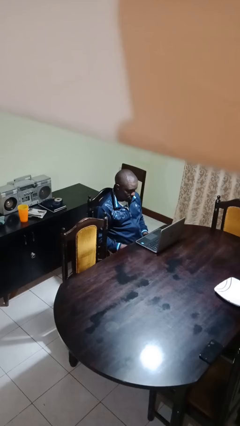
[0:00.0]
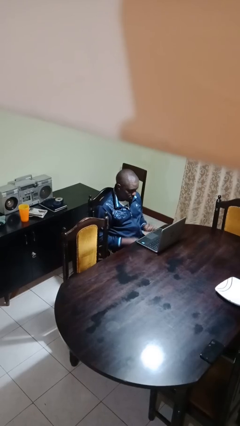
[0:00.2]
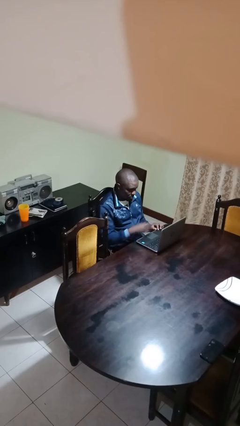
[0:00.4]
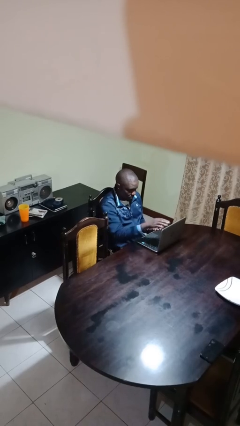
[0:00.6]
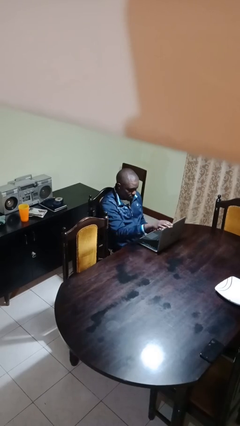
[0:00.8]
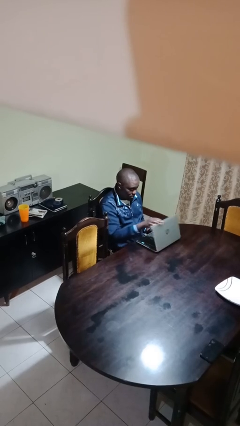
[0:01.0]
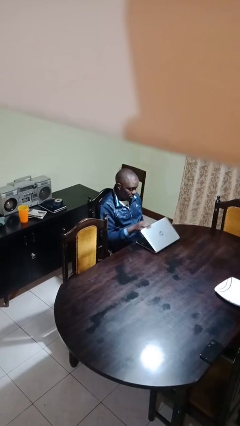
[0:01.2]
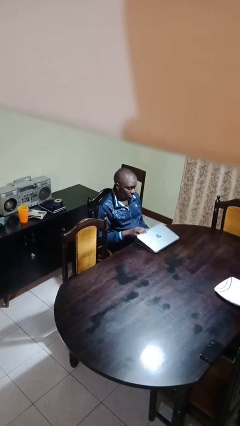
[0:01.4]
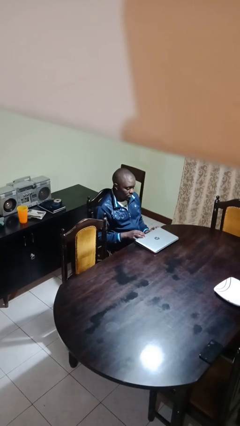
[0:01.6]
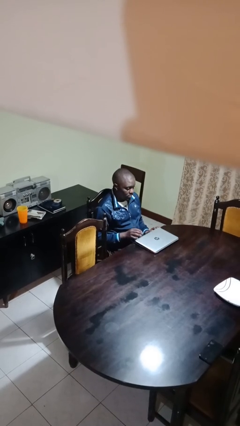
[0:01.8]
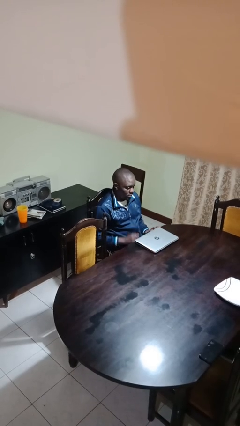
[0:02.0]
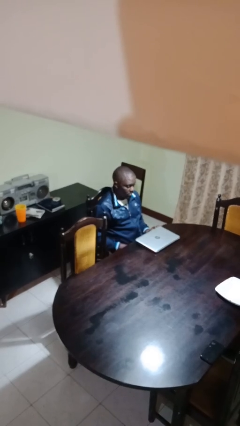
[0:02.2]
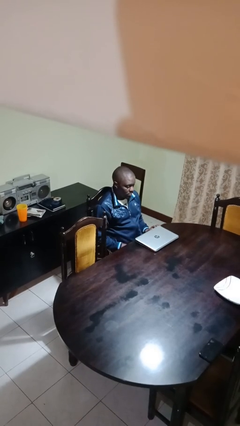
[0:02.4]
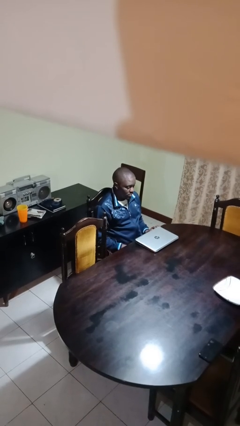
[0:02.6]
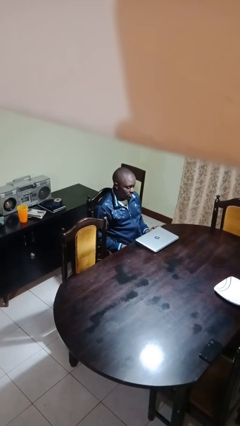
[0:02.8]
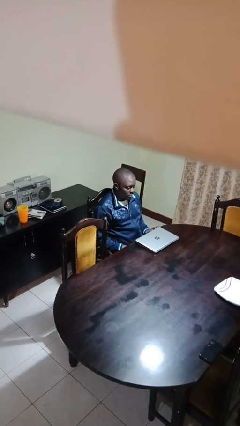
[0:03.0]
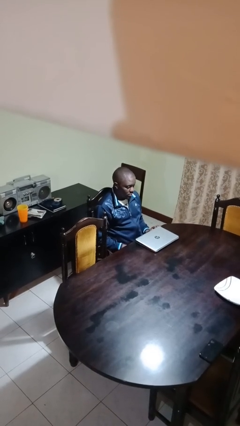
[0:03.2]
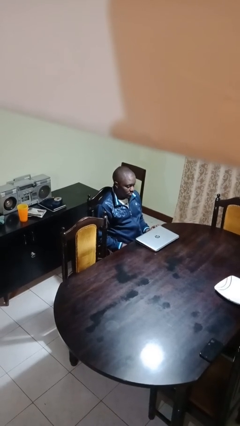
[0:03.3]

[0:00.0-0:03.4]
person closes laptop

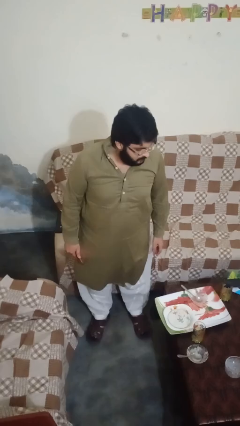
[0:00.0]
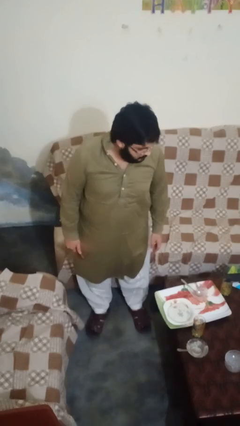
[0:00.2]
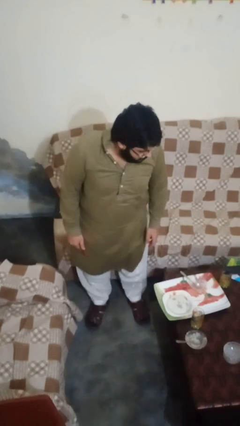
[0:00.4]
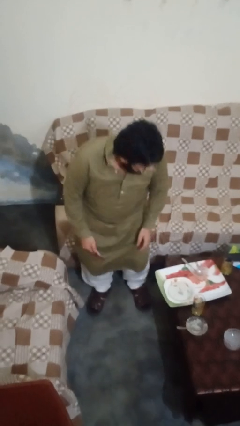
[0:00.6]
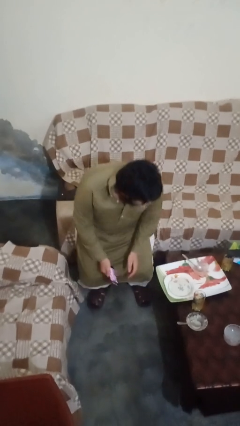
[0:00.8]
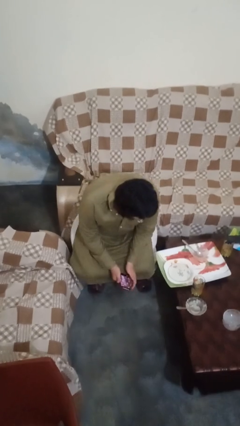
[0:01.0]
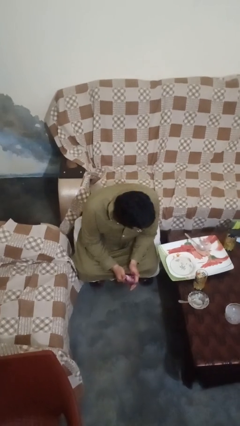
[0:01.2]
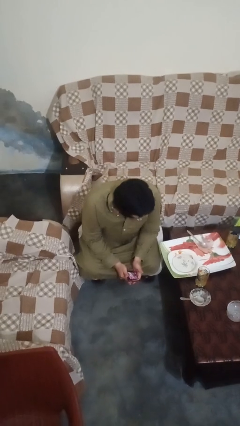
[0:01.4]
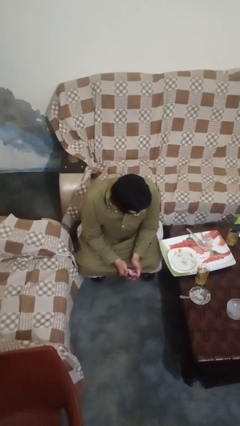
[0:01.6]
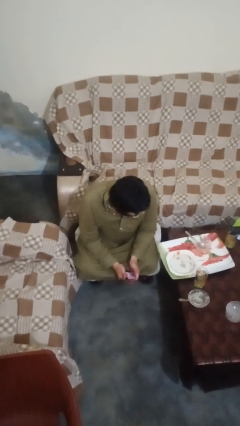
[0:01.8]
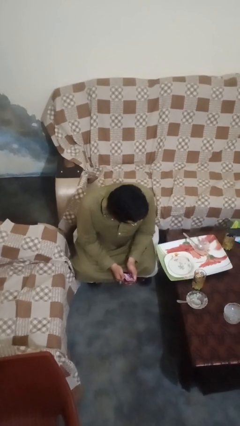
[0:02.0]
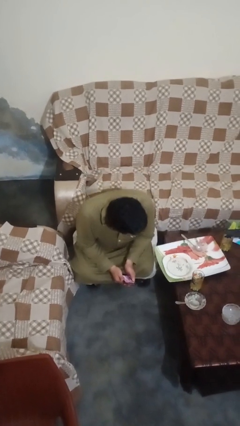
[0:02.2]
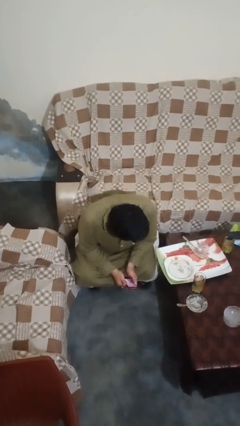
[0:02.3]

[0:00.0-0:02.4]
person squats

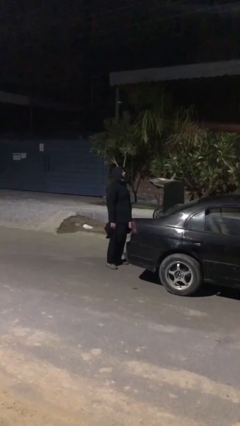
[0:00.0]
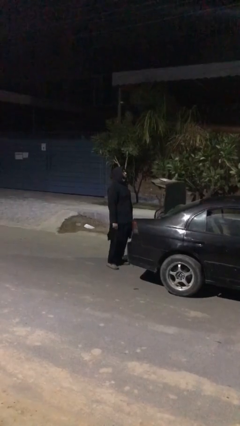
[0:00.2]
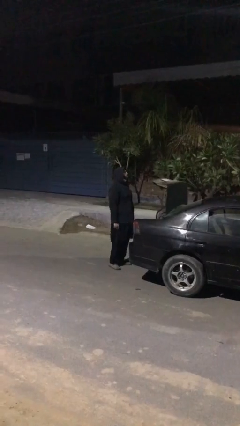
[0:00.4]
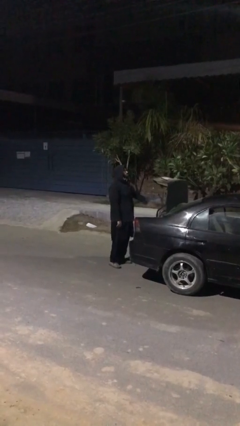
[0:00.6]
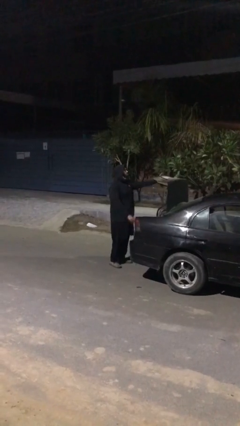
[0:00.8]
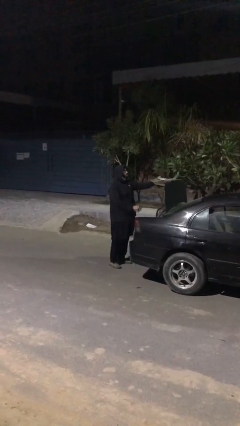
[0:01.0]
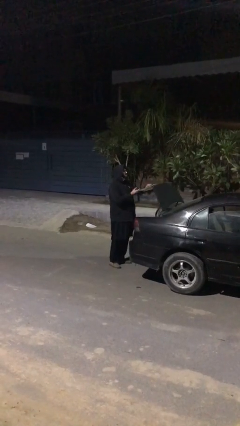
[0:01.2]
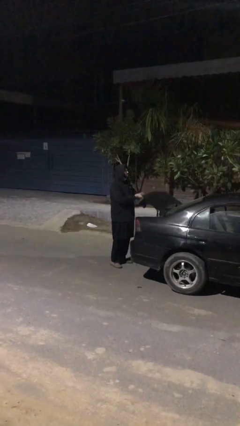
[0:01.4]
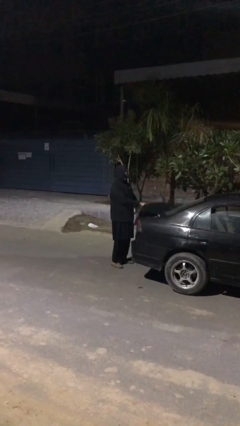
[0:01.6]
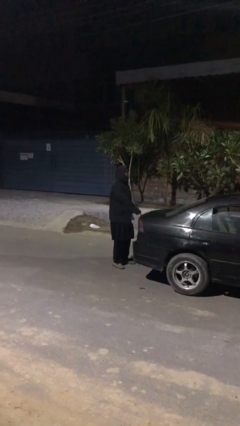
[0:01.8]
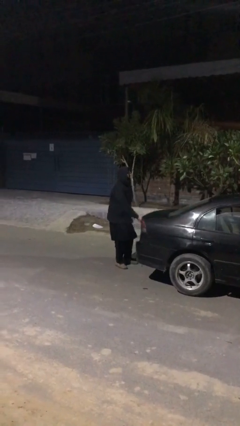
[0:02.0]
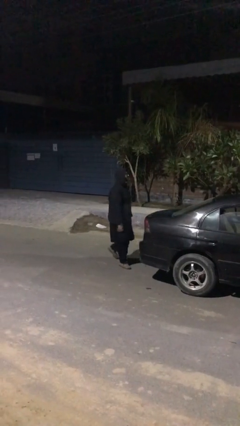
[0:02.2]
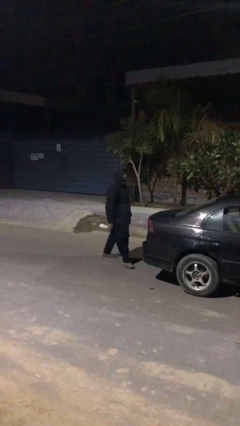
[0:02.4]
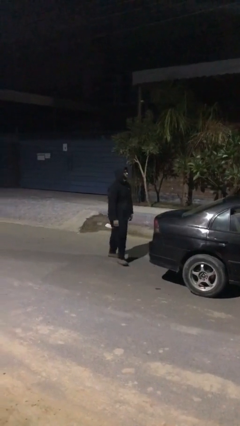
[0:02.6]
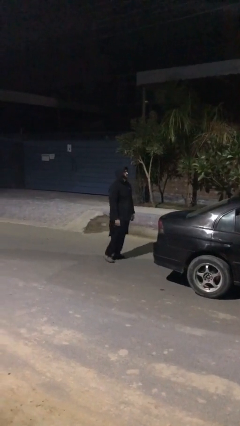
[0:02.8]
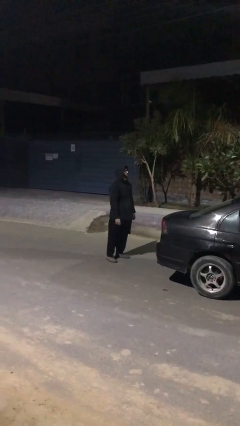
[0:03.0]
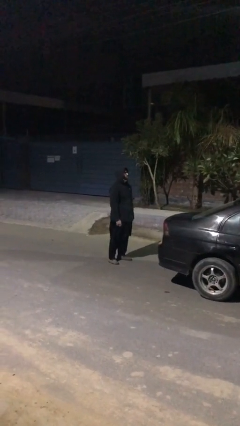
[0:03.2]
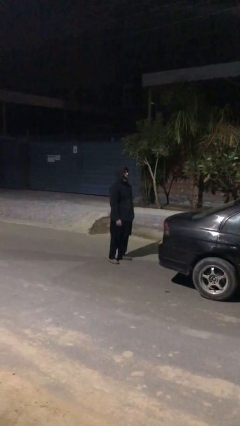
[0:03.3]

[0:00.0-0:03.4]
person closes car trunk

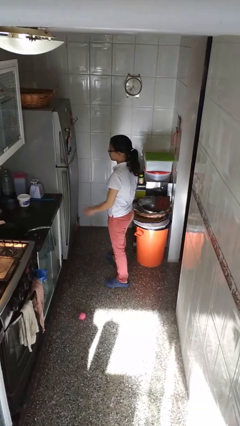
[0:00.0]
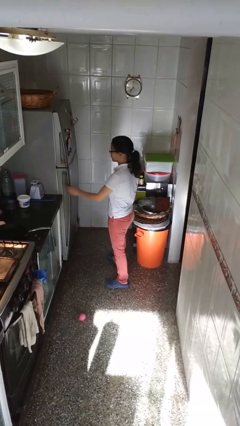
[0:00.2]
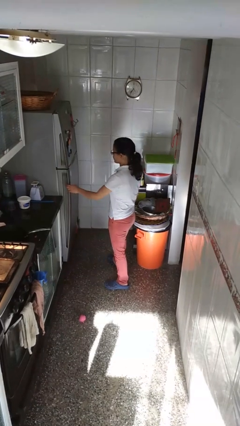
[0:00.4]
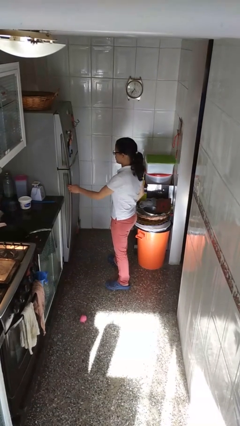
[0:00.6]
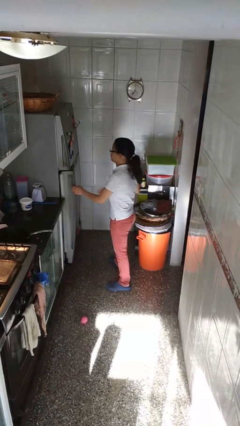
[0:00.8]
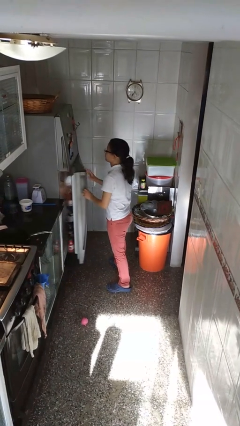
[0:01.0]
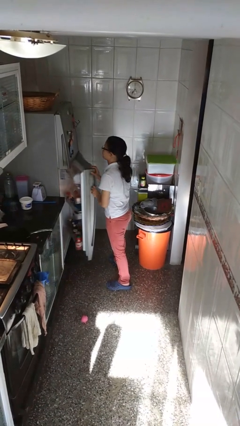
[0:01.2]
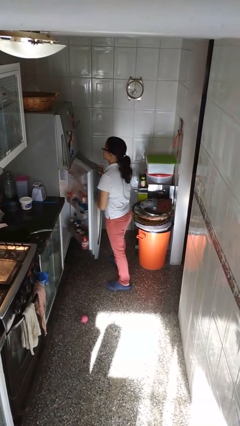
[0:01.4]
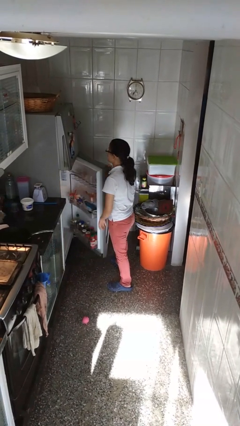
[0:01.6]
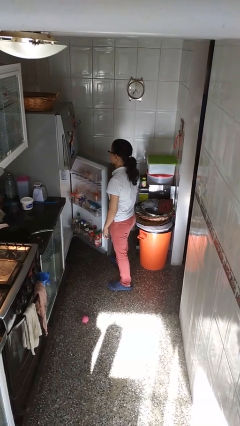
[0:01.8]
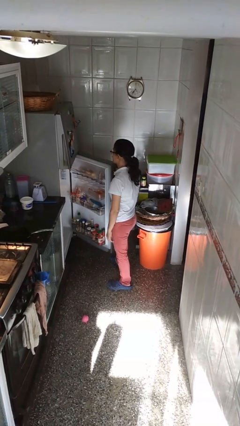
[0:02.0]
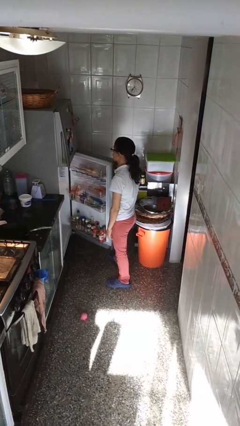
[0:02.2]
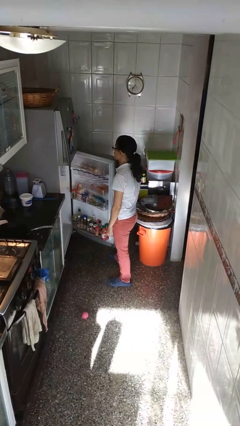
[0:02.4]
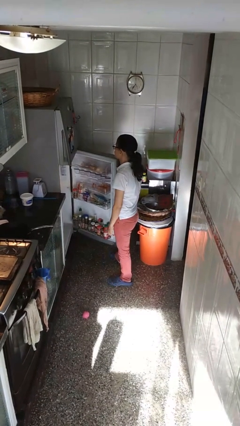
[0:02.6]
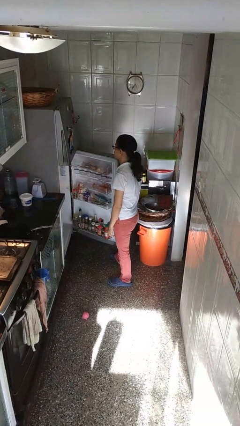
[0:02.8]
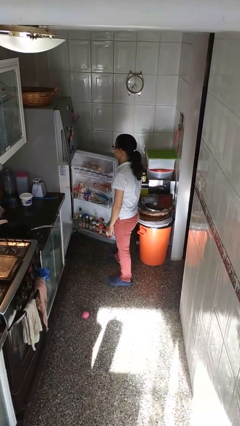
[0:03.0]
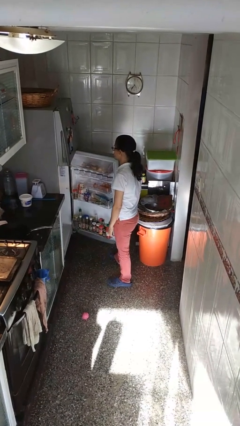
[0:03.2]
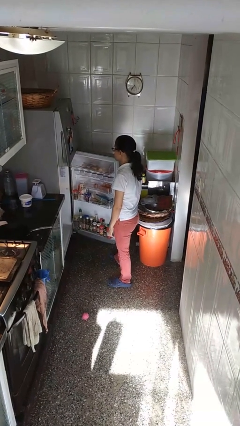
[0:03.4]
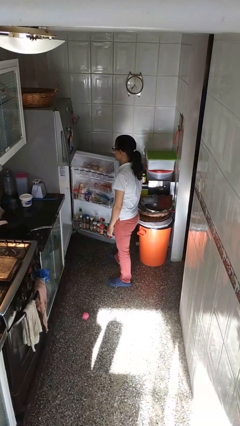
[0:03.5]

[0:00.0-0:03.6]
person opens refrigerator

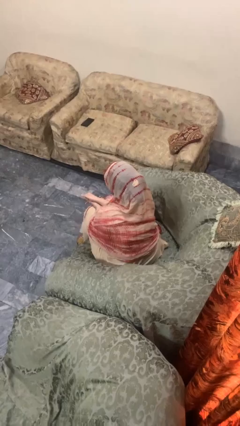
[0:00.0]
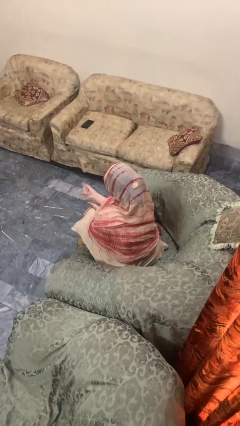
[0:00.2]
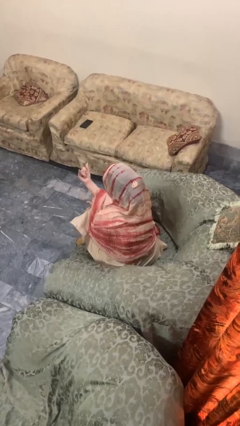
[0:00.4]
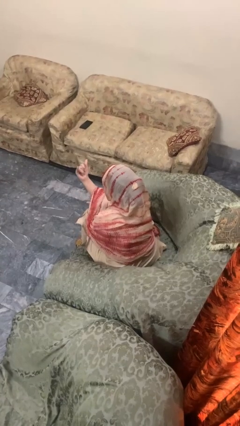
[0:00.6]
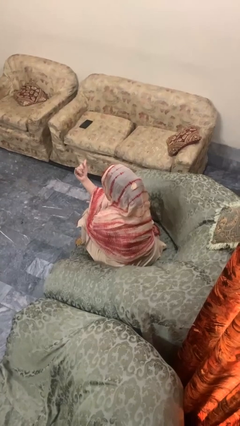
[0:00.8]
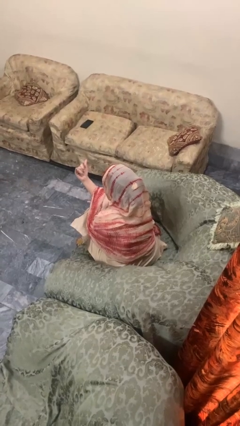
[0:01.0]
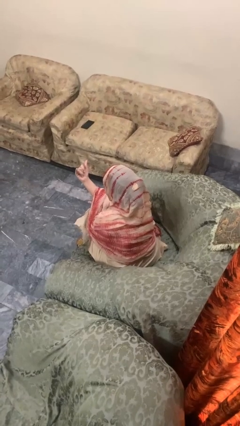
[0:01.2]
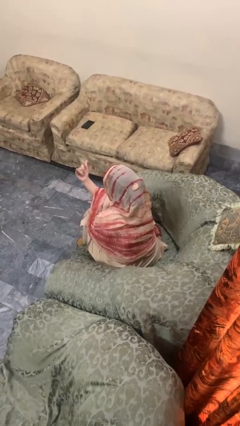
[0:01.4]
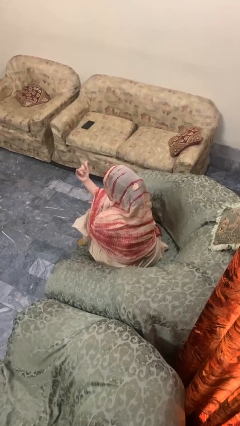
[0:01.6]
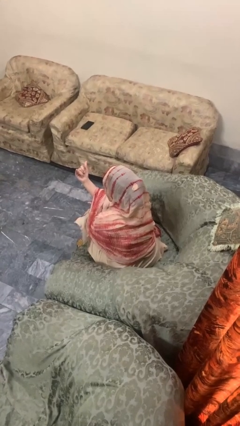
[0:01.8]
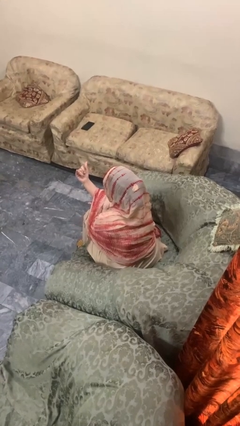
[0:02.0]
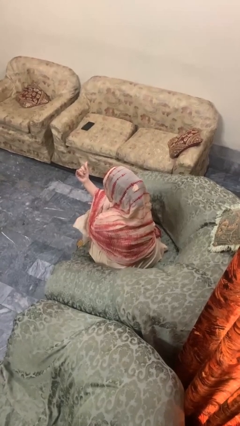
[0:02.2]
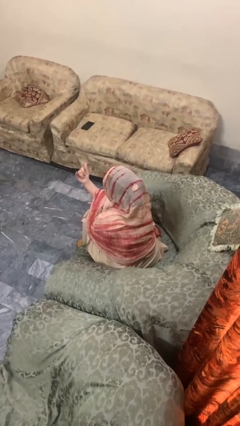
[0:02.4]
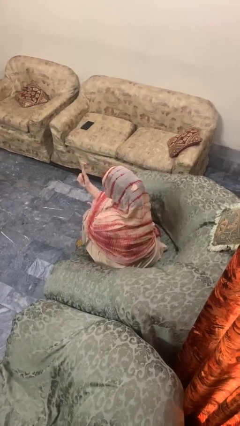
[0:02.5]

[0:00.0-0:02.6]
person gestures hang loose

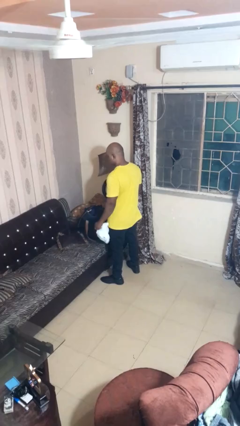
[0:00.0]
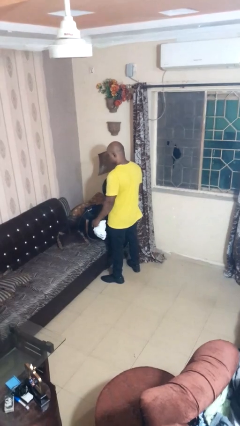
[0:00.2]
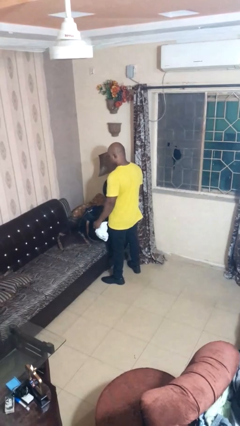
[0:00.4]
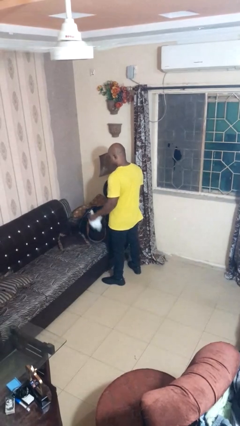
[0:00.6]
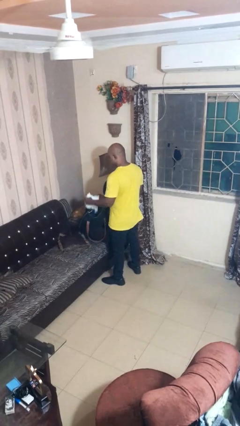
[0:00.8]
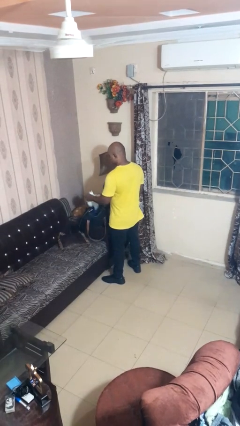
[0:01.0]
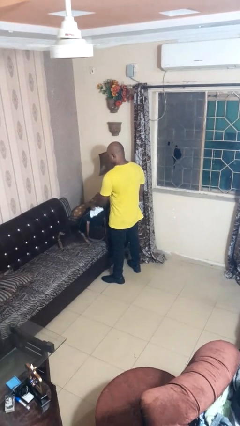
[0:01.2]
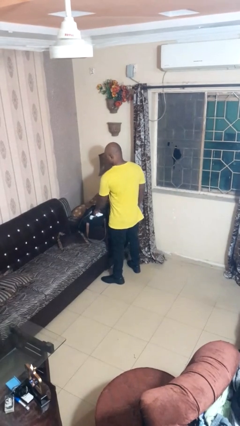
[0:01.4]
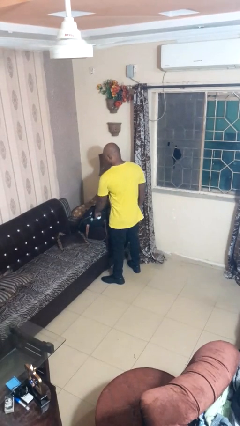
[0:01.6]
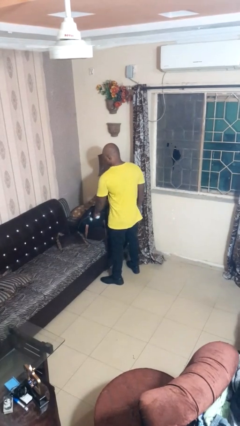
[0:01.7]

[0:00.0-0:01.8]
person puts object into bag
